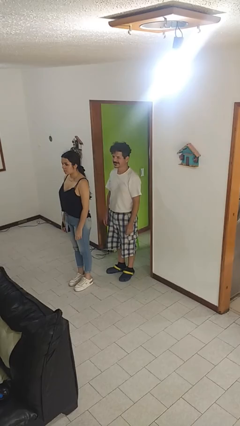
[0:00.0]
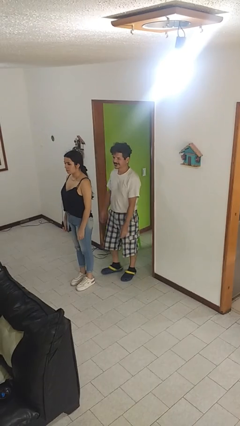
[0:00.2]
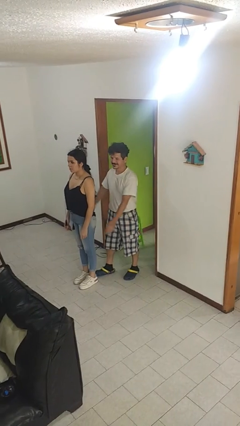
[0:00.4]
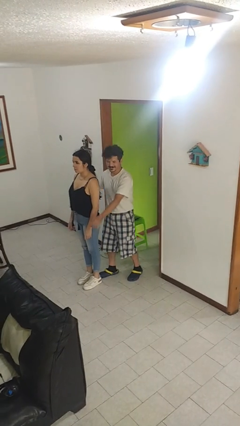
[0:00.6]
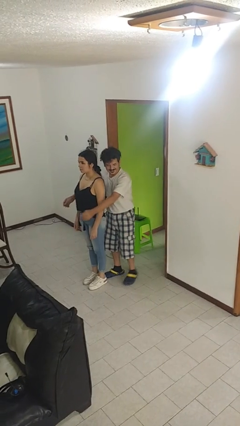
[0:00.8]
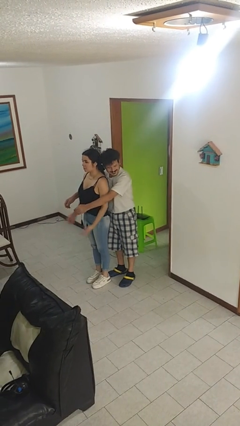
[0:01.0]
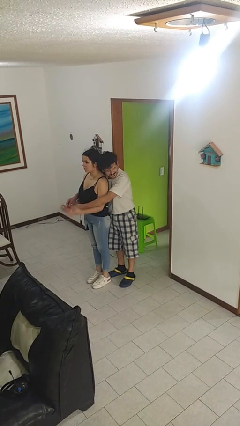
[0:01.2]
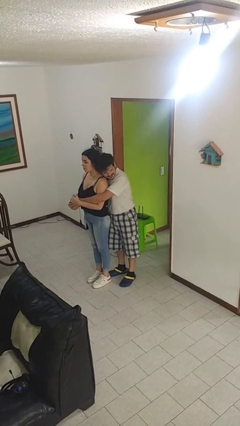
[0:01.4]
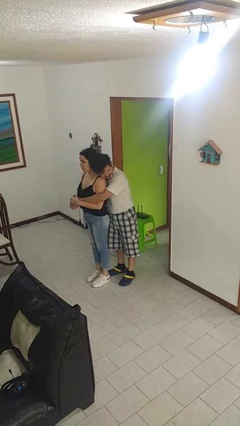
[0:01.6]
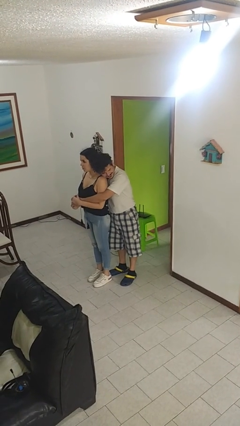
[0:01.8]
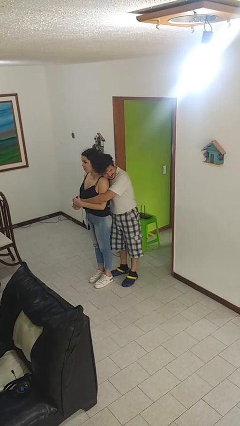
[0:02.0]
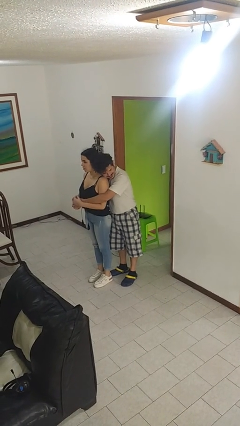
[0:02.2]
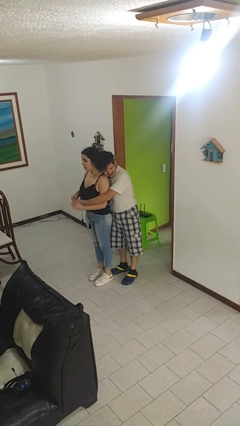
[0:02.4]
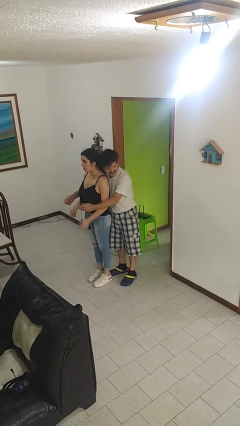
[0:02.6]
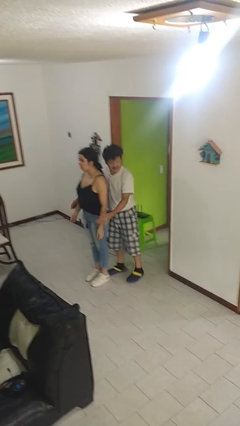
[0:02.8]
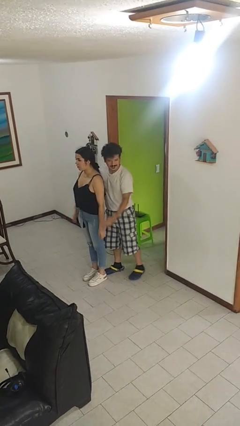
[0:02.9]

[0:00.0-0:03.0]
person hugs person from behind

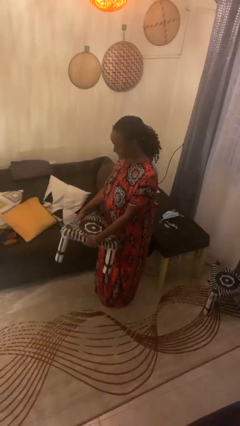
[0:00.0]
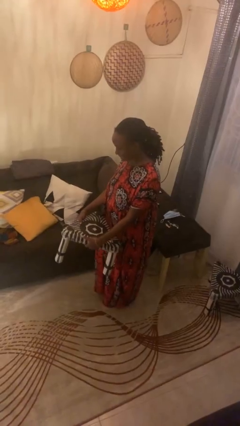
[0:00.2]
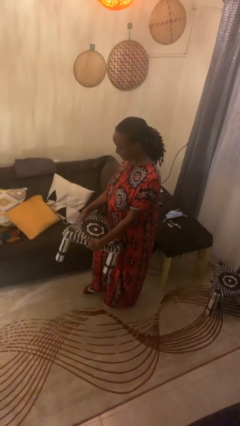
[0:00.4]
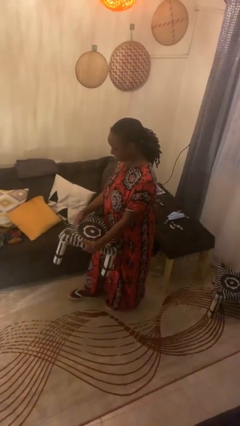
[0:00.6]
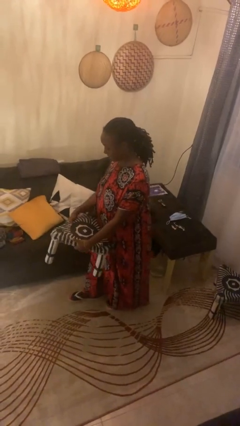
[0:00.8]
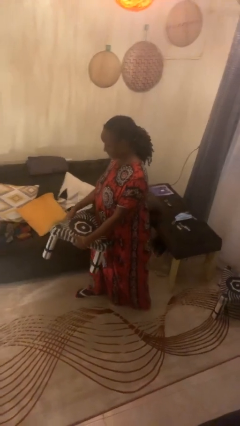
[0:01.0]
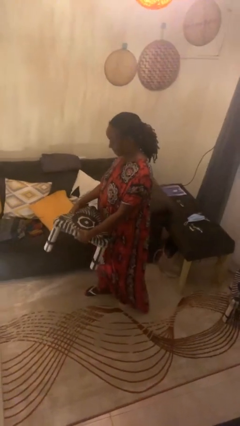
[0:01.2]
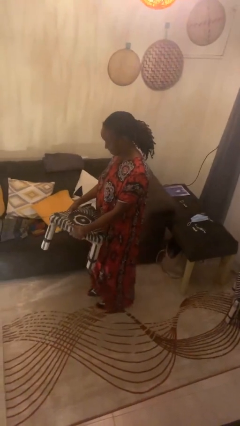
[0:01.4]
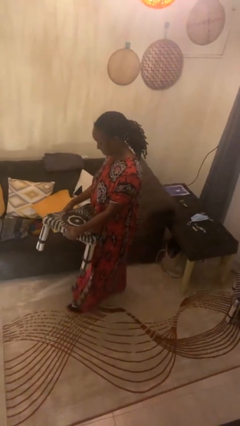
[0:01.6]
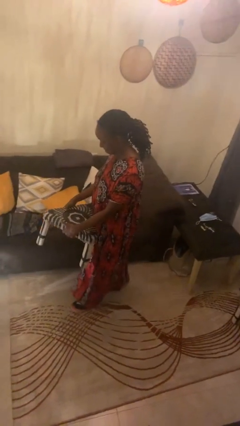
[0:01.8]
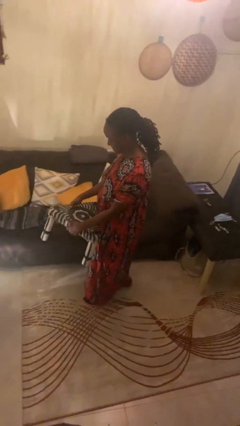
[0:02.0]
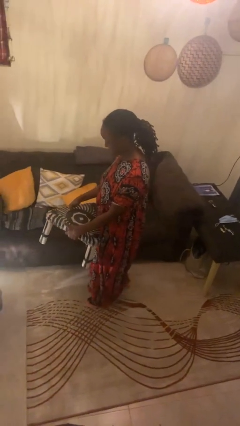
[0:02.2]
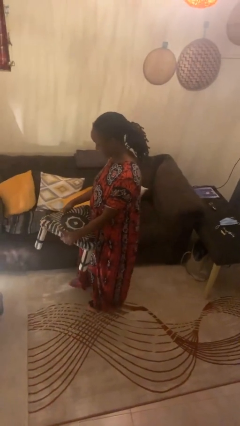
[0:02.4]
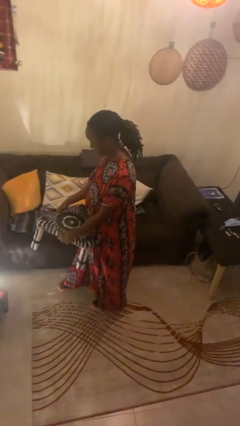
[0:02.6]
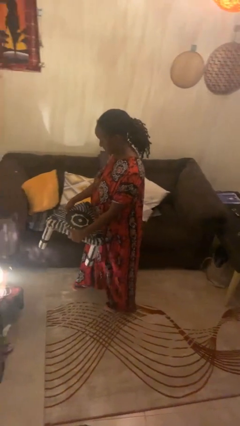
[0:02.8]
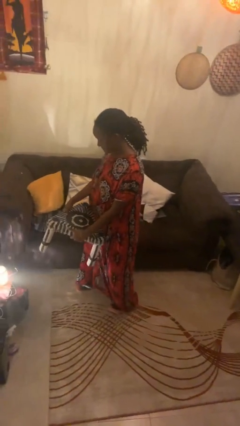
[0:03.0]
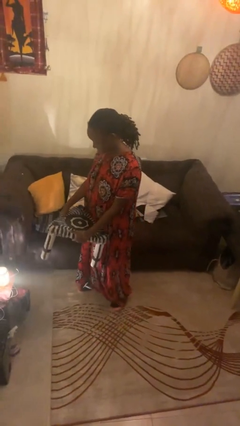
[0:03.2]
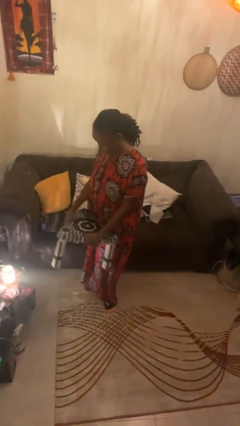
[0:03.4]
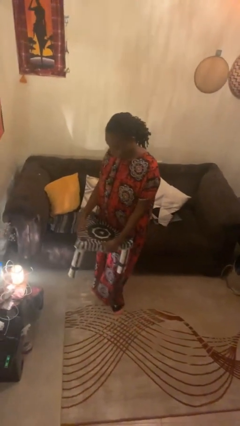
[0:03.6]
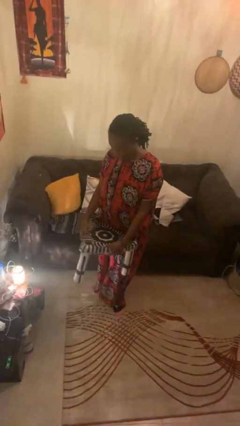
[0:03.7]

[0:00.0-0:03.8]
person carries furniture

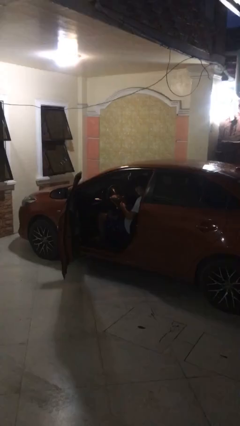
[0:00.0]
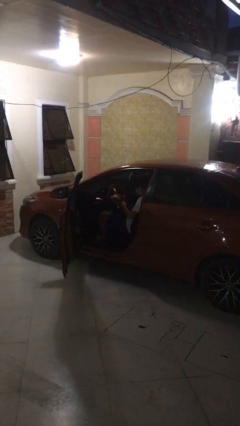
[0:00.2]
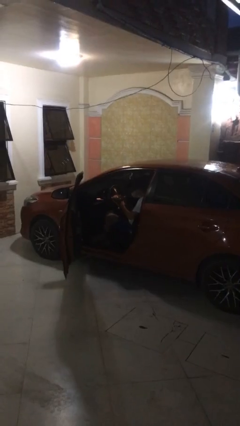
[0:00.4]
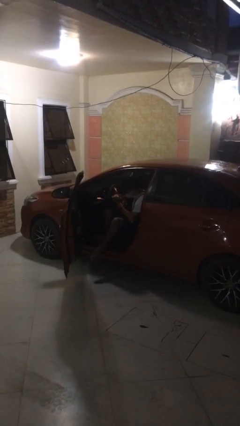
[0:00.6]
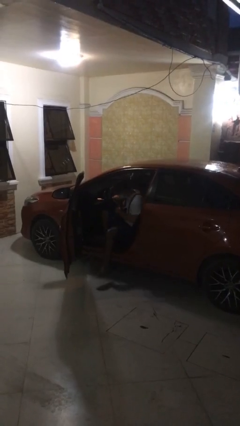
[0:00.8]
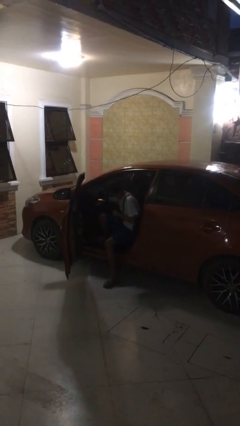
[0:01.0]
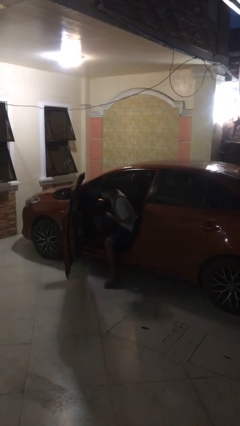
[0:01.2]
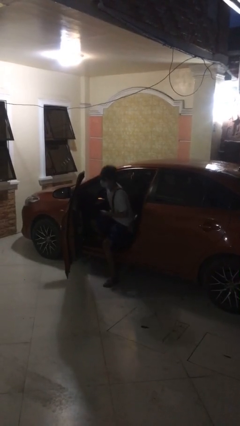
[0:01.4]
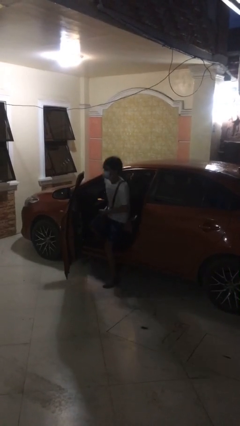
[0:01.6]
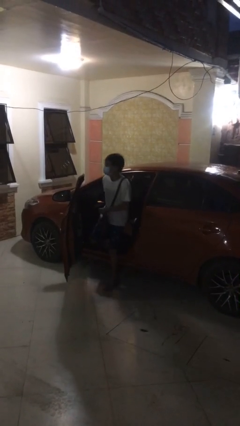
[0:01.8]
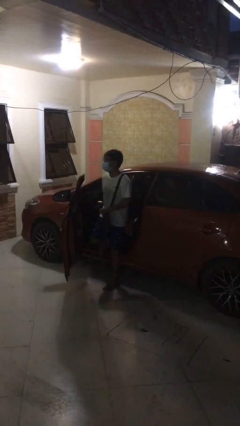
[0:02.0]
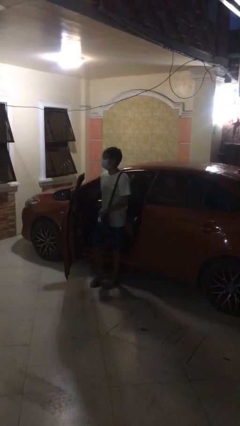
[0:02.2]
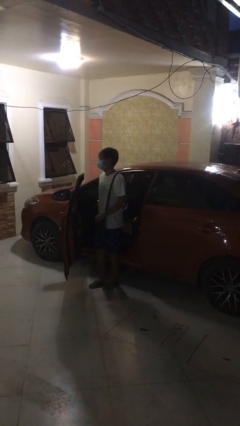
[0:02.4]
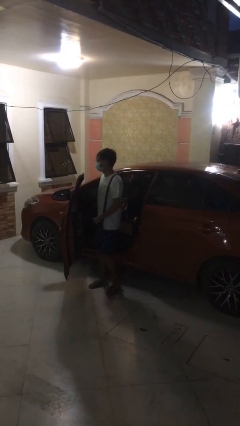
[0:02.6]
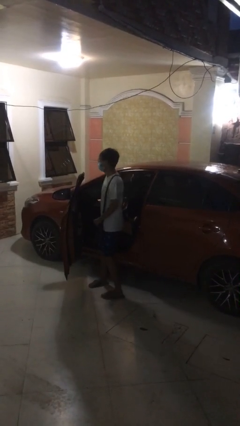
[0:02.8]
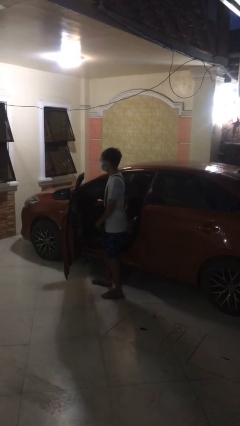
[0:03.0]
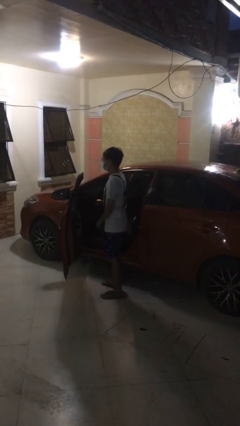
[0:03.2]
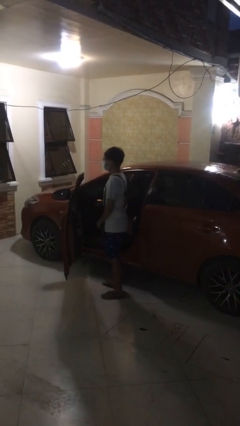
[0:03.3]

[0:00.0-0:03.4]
person exits car

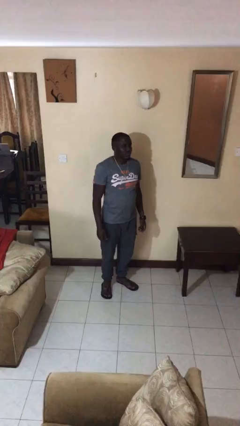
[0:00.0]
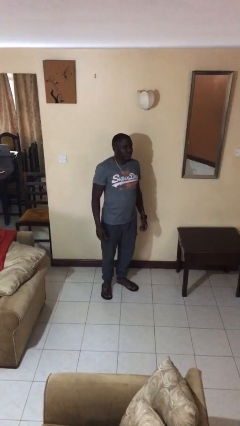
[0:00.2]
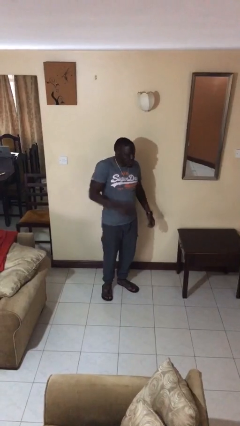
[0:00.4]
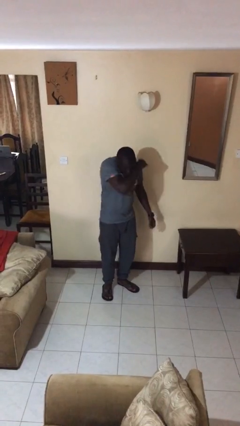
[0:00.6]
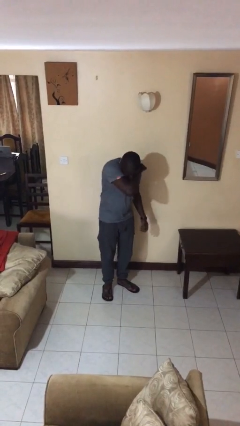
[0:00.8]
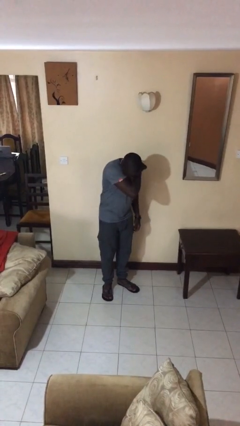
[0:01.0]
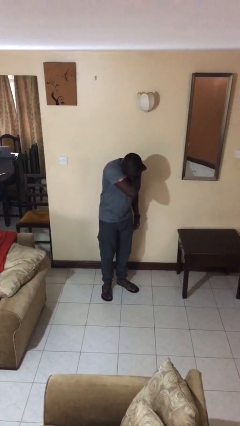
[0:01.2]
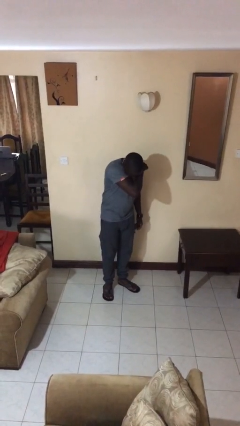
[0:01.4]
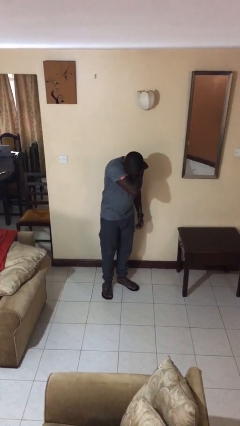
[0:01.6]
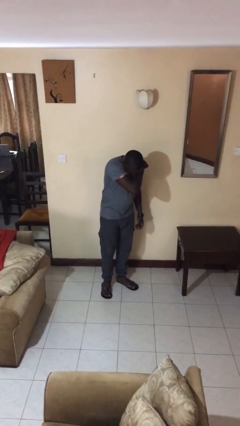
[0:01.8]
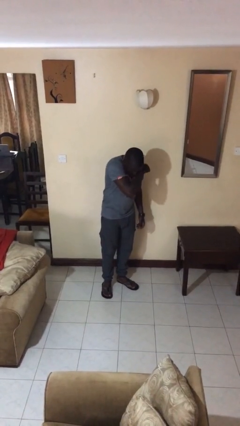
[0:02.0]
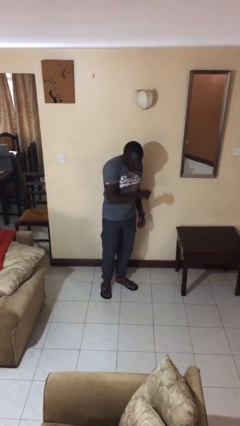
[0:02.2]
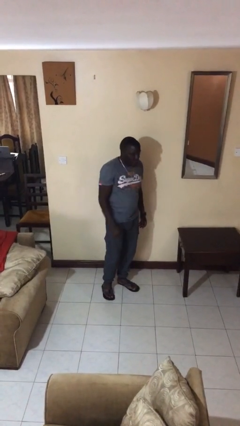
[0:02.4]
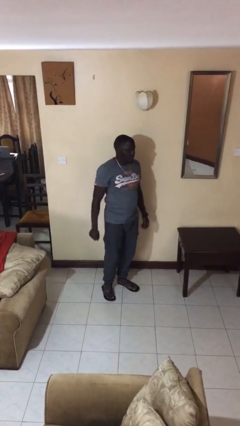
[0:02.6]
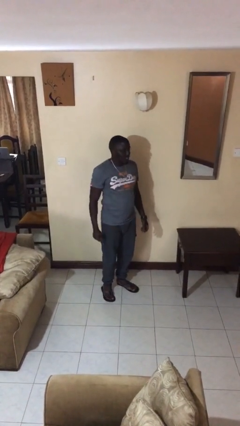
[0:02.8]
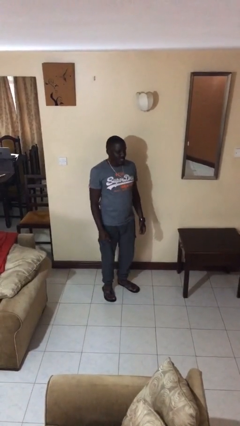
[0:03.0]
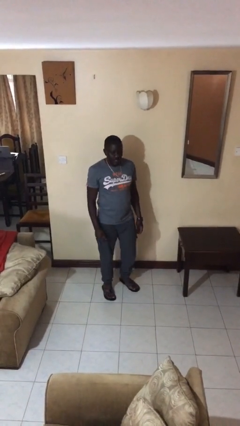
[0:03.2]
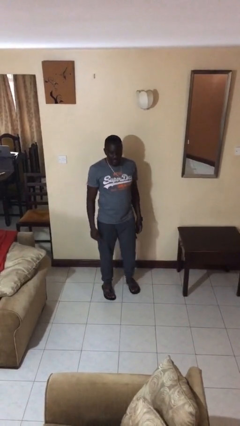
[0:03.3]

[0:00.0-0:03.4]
person sneezes into arm

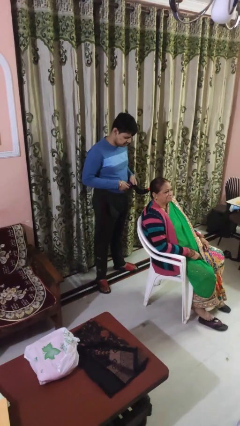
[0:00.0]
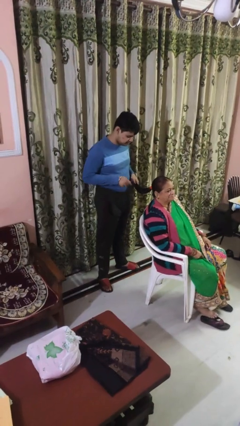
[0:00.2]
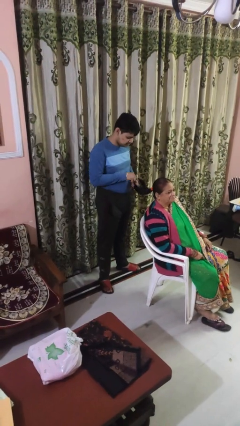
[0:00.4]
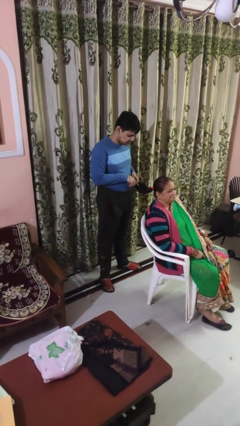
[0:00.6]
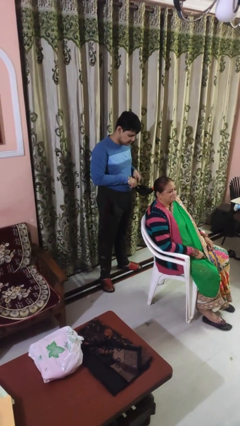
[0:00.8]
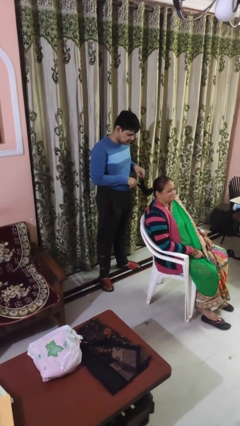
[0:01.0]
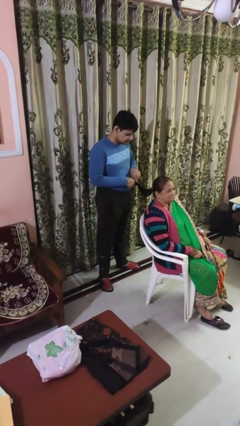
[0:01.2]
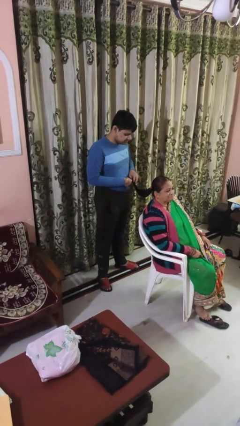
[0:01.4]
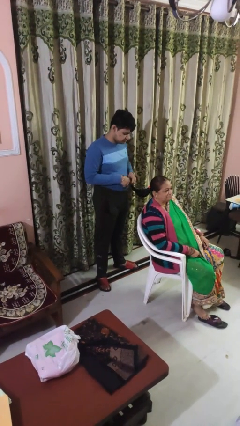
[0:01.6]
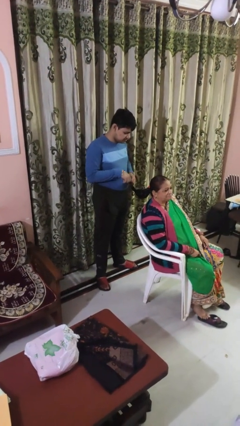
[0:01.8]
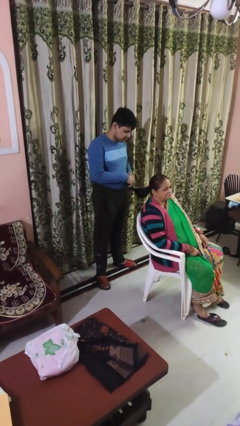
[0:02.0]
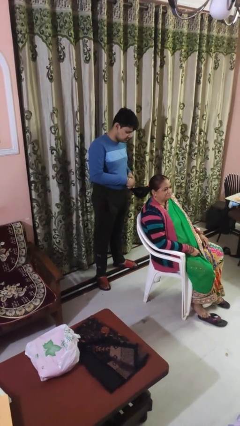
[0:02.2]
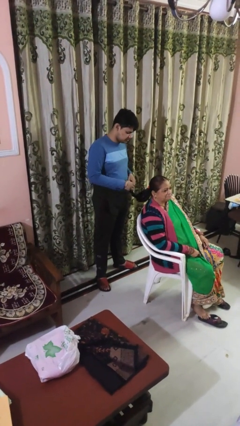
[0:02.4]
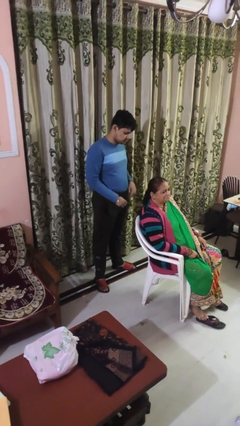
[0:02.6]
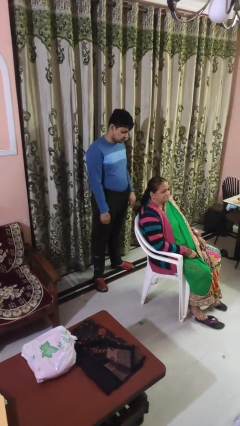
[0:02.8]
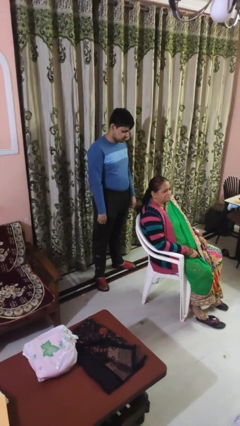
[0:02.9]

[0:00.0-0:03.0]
person braids hair of person

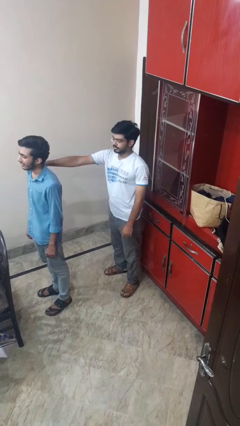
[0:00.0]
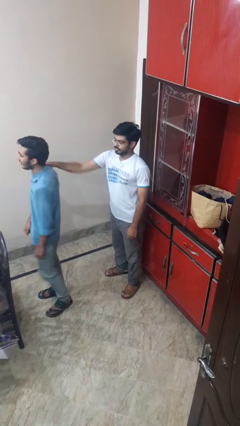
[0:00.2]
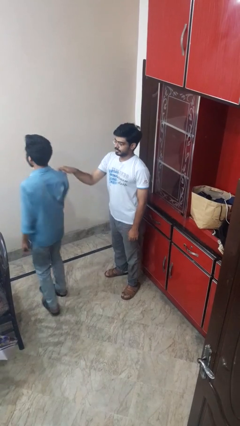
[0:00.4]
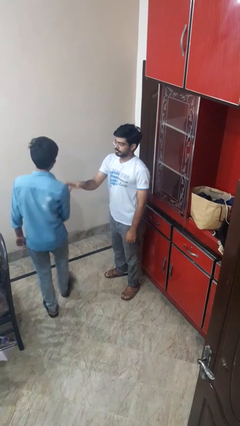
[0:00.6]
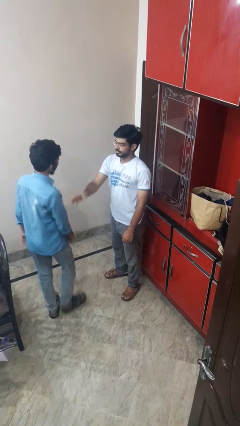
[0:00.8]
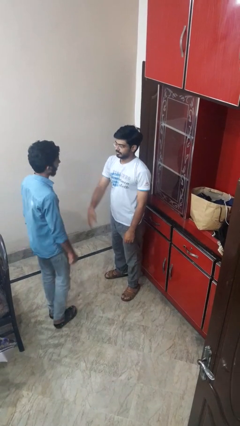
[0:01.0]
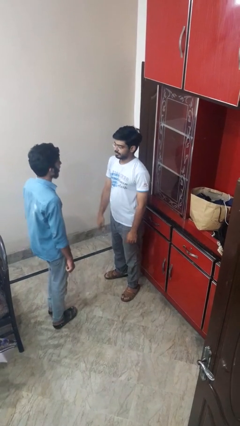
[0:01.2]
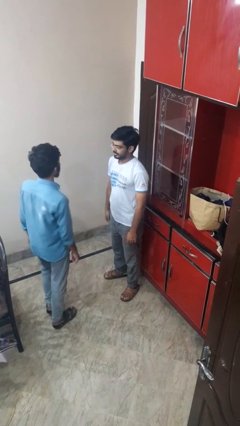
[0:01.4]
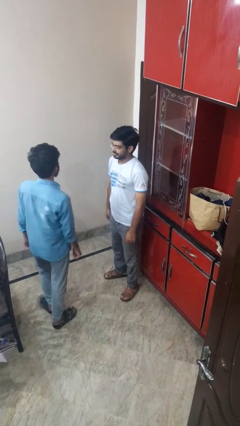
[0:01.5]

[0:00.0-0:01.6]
person spins person around
